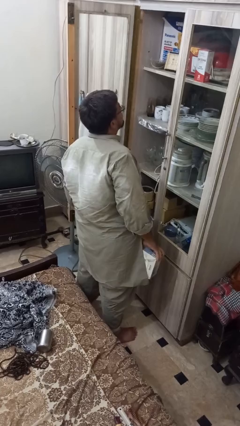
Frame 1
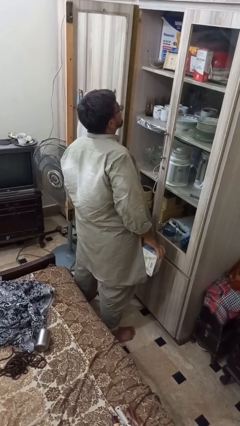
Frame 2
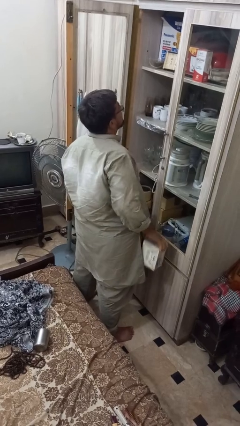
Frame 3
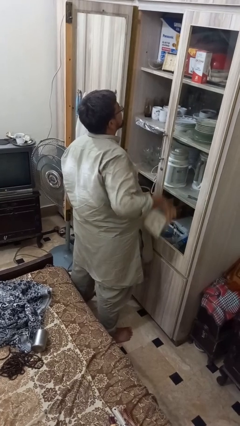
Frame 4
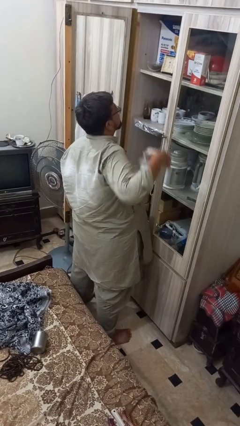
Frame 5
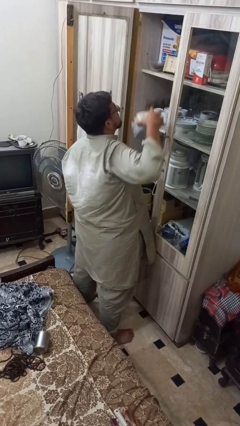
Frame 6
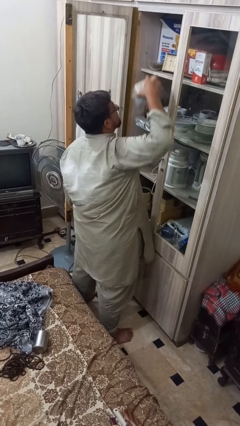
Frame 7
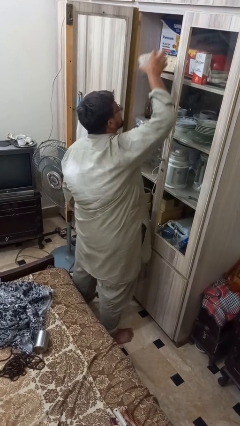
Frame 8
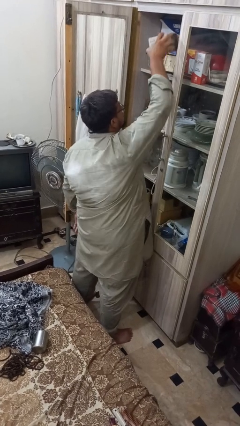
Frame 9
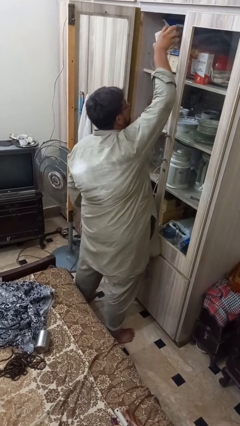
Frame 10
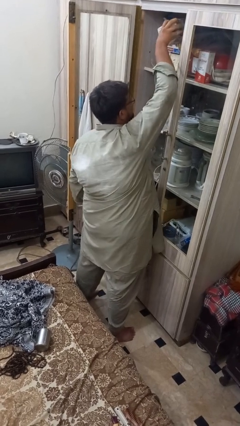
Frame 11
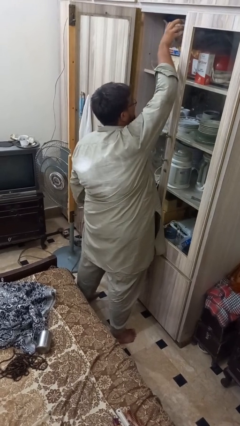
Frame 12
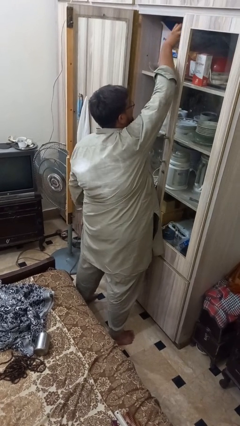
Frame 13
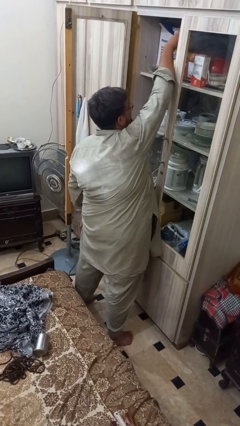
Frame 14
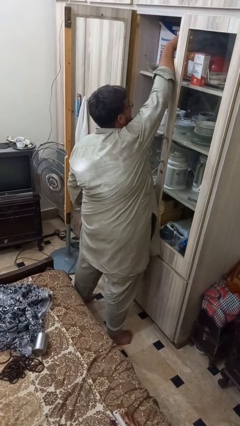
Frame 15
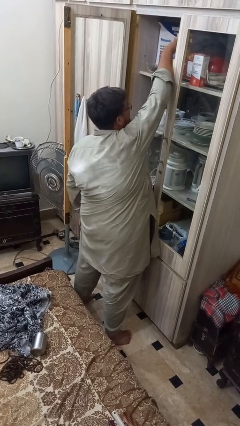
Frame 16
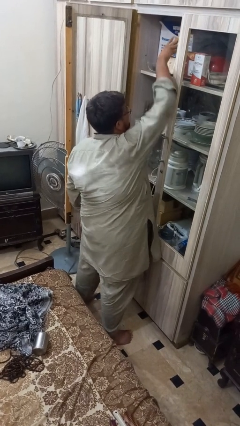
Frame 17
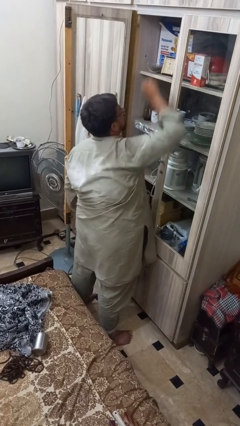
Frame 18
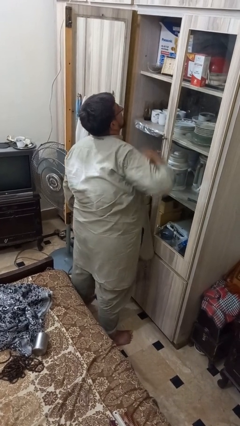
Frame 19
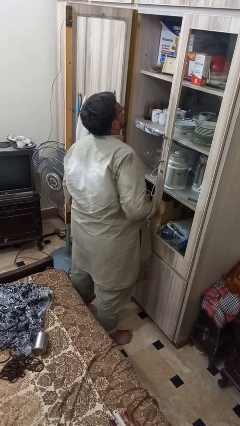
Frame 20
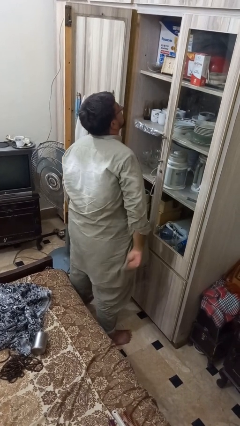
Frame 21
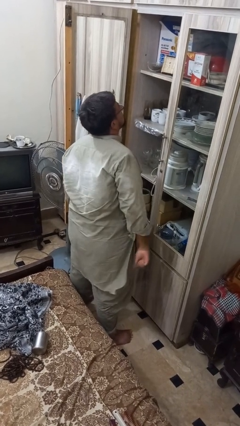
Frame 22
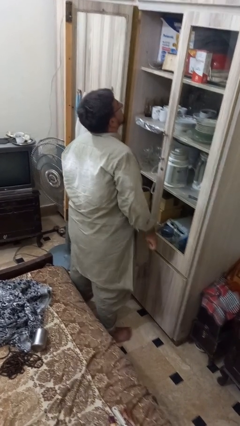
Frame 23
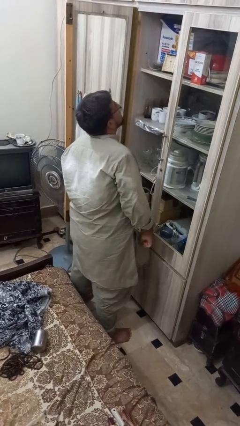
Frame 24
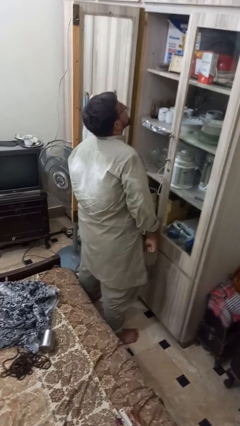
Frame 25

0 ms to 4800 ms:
person puts down object on shelf

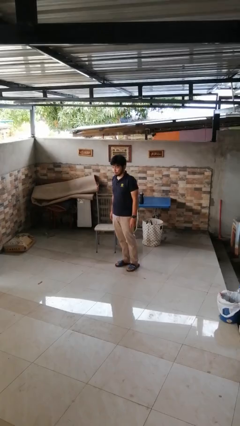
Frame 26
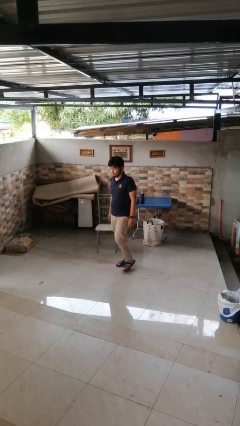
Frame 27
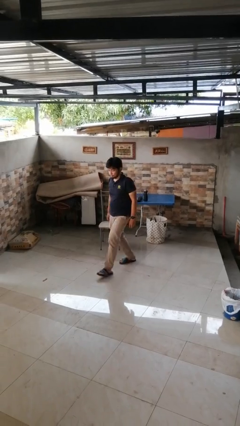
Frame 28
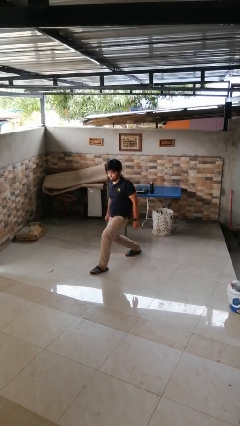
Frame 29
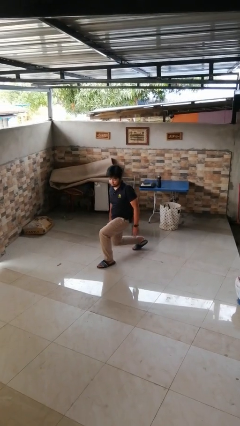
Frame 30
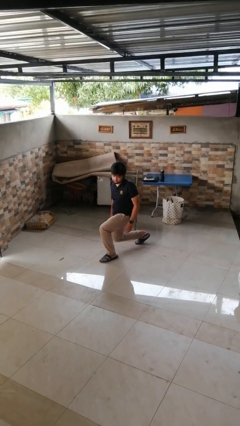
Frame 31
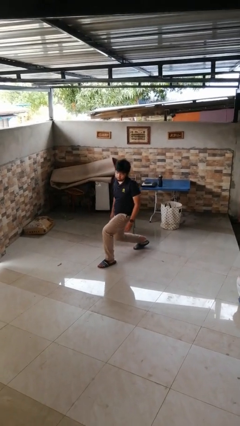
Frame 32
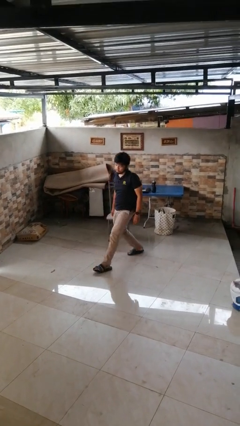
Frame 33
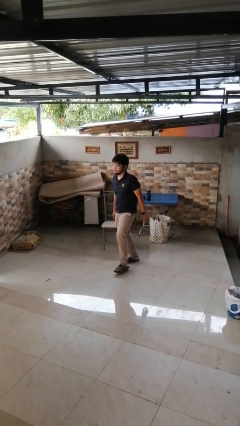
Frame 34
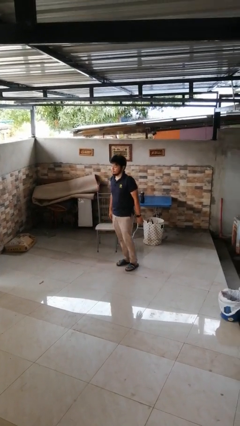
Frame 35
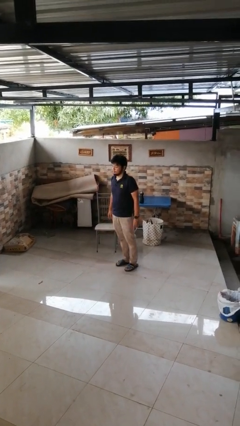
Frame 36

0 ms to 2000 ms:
person exercises with lunges

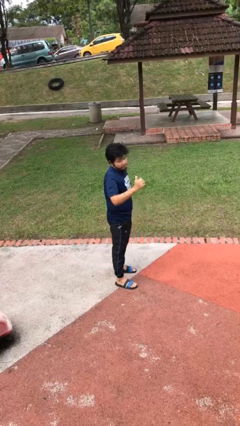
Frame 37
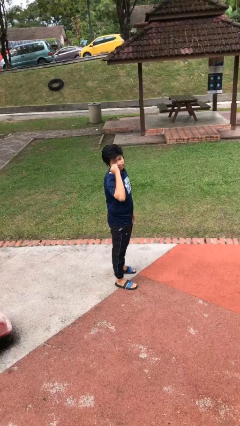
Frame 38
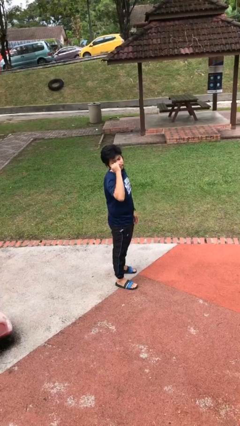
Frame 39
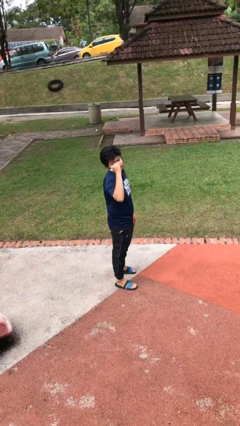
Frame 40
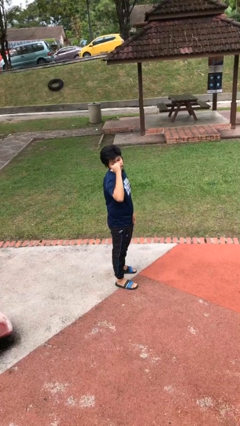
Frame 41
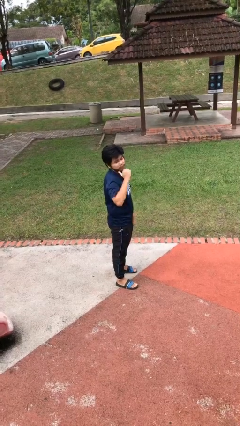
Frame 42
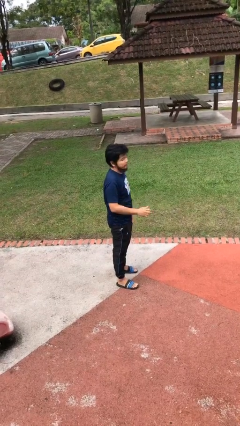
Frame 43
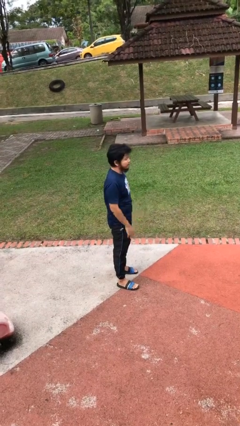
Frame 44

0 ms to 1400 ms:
person gestures behind me

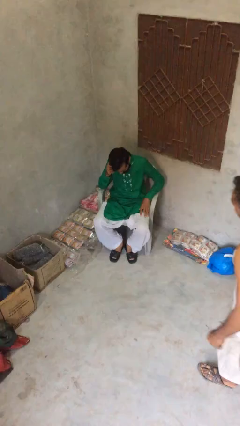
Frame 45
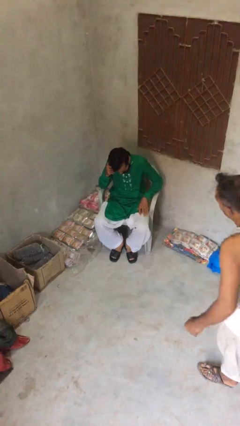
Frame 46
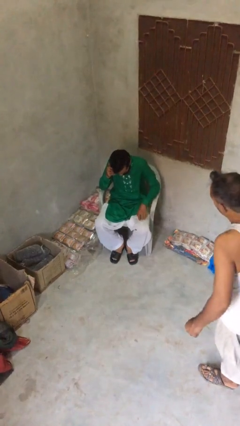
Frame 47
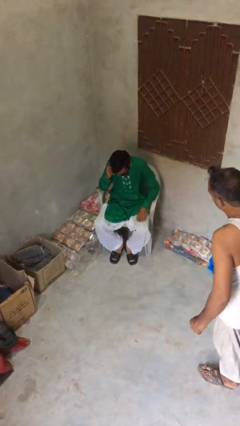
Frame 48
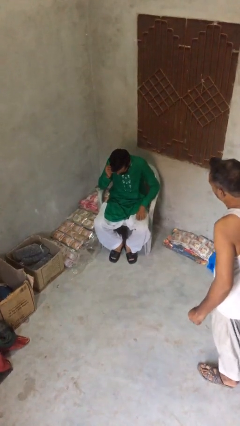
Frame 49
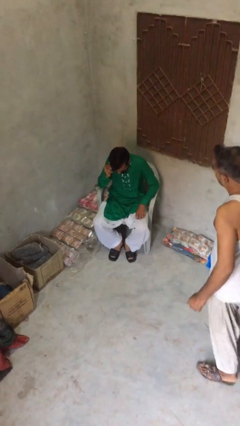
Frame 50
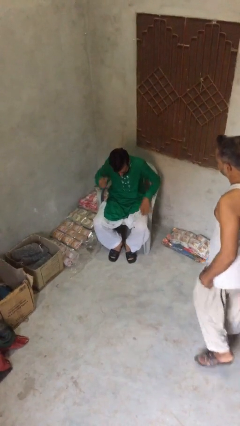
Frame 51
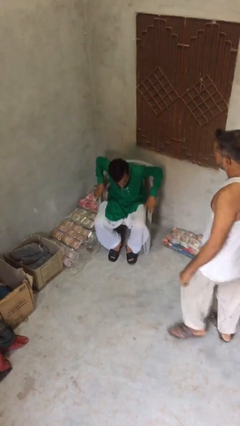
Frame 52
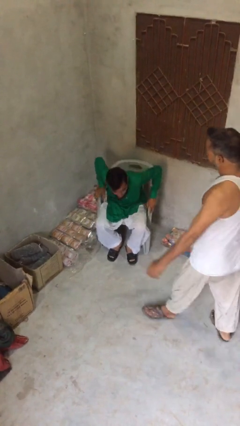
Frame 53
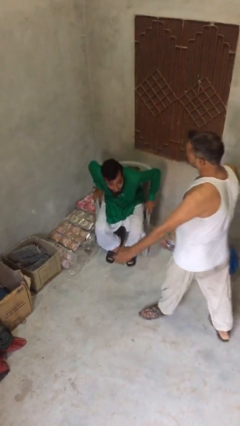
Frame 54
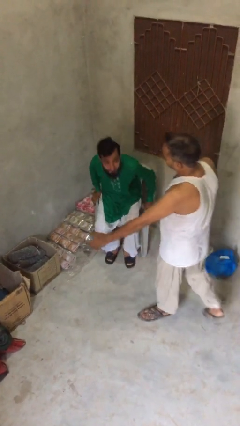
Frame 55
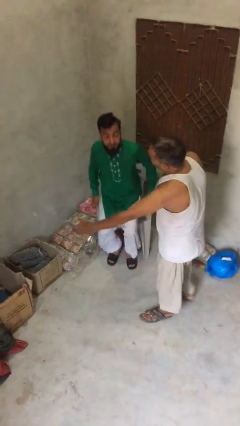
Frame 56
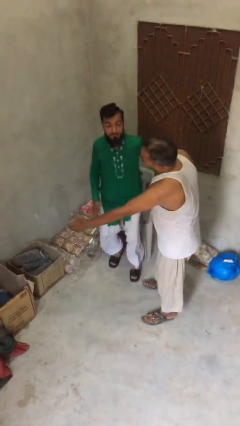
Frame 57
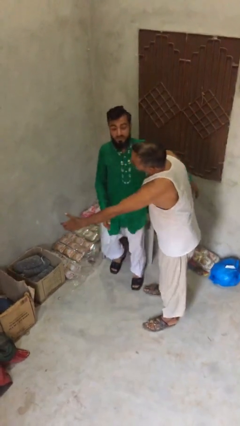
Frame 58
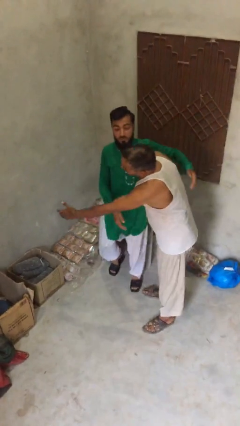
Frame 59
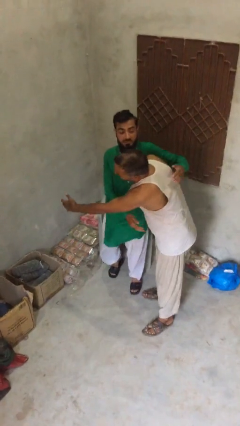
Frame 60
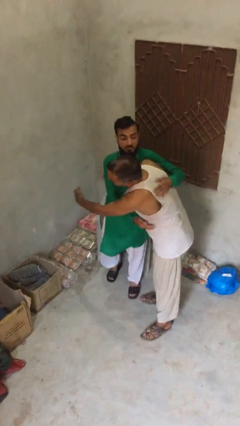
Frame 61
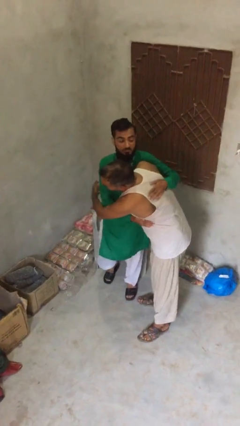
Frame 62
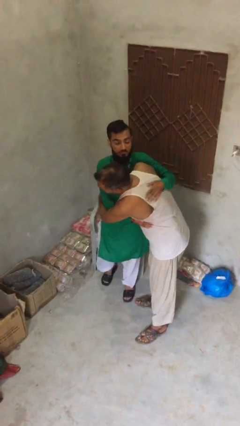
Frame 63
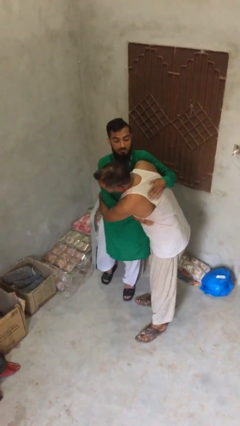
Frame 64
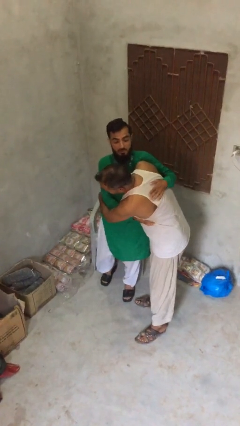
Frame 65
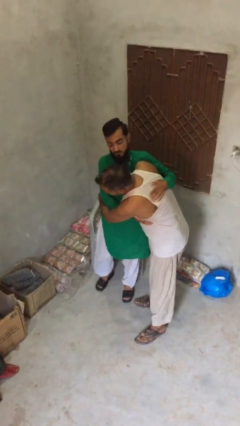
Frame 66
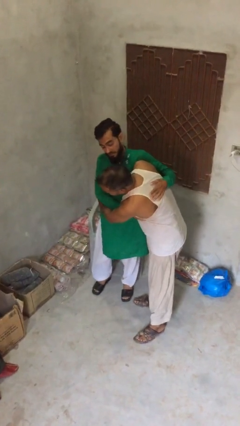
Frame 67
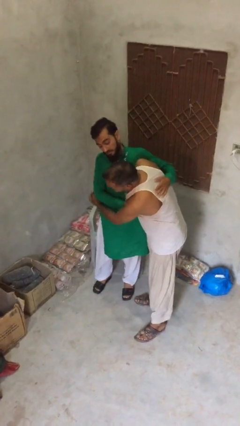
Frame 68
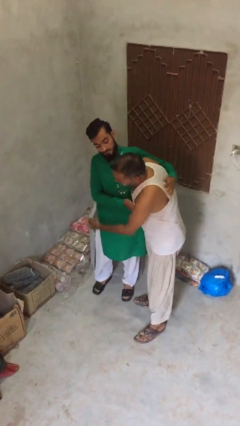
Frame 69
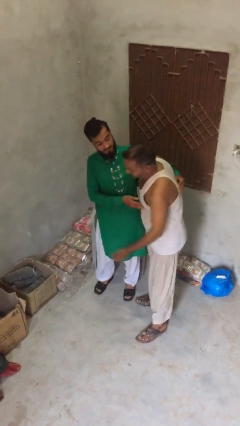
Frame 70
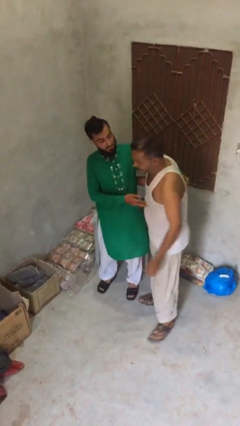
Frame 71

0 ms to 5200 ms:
person embraces person

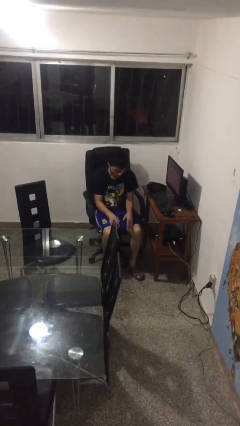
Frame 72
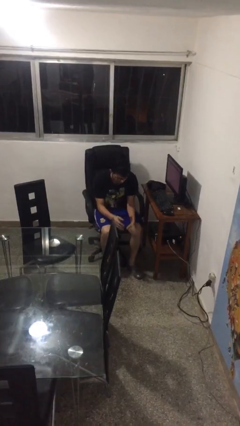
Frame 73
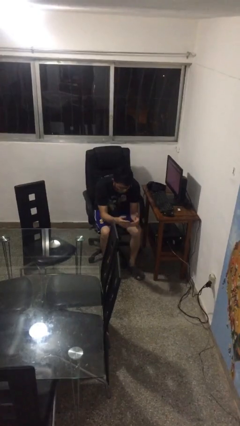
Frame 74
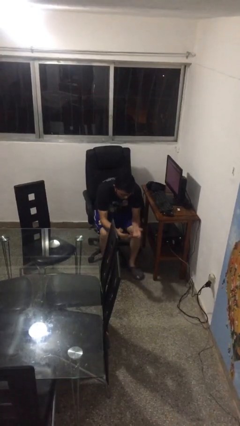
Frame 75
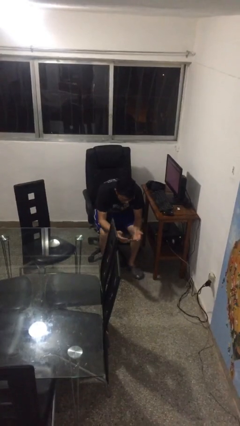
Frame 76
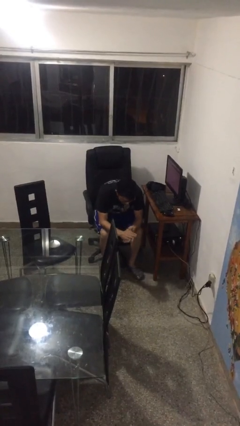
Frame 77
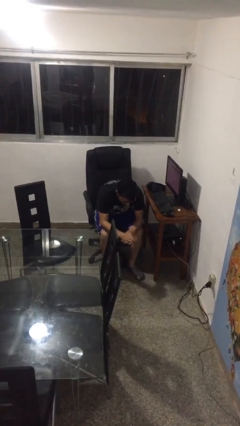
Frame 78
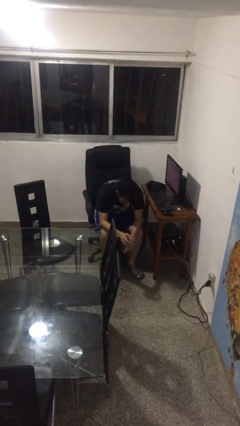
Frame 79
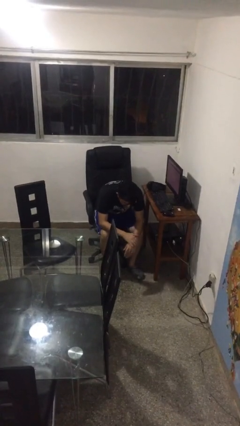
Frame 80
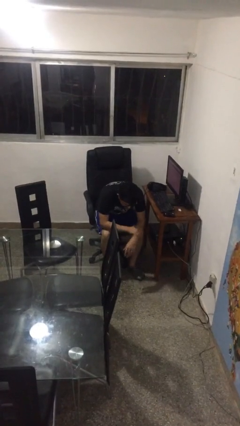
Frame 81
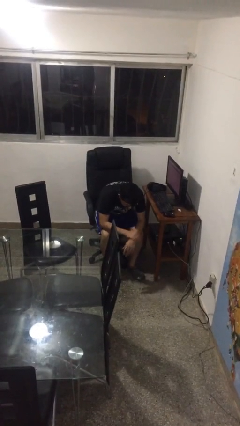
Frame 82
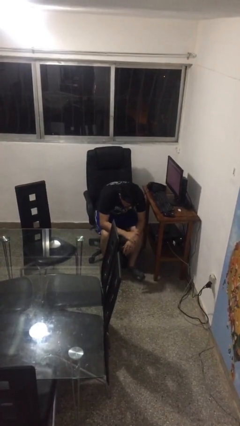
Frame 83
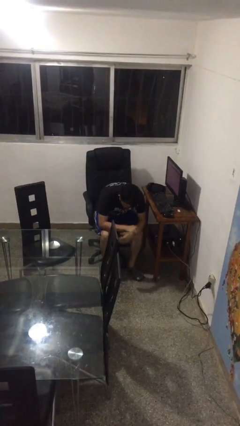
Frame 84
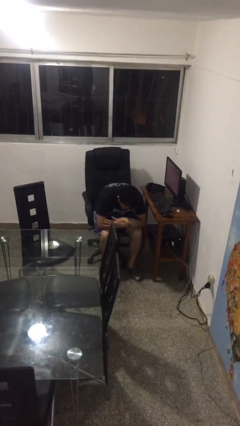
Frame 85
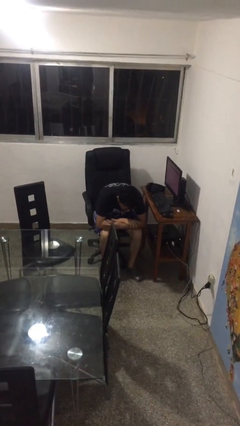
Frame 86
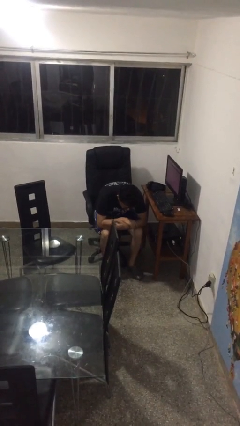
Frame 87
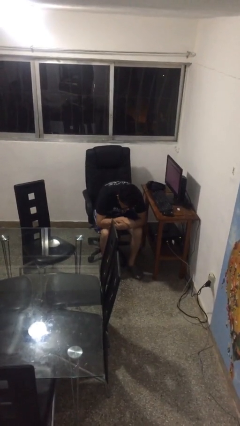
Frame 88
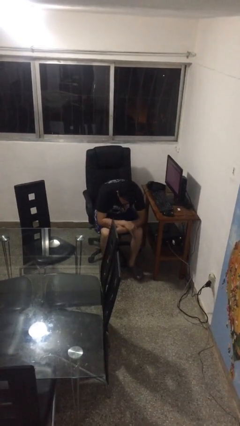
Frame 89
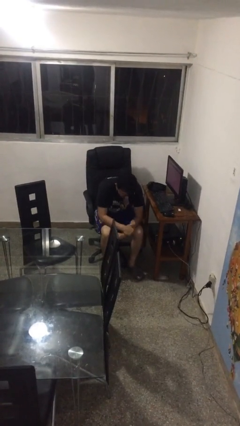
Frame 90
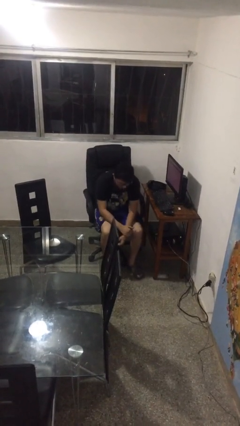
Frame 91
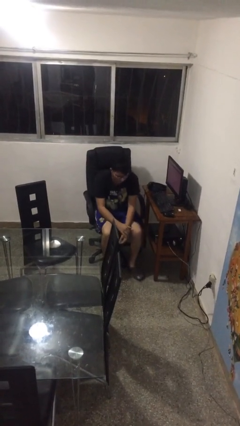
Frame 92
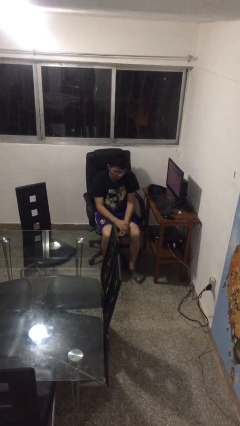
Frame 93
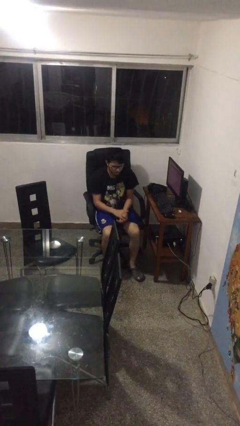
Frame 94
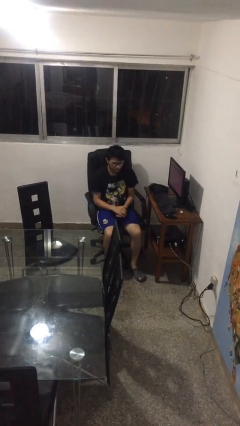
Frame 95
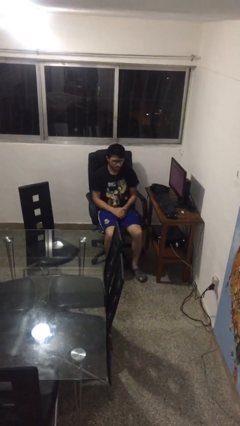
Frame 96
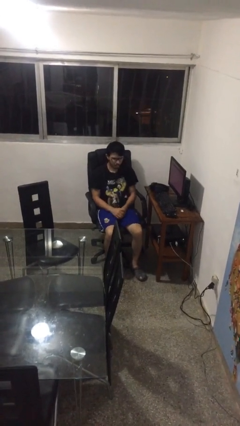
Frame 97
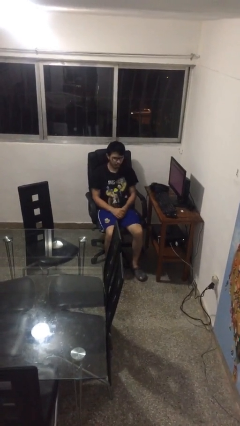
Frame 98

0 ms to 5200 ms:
person looks at hands in lap
